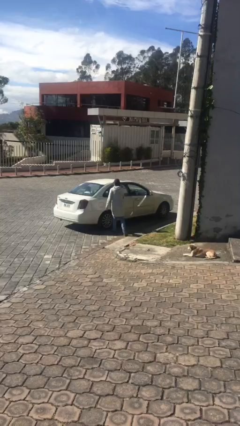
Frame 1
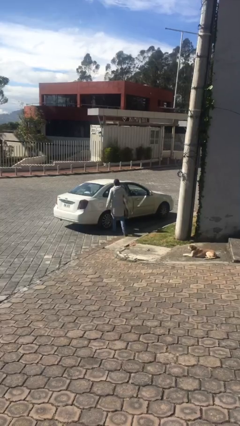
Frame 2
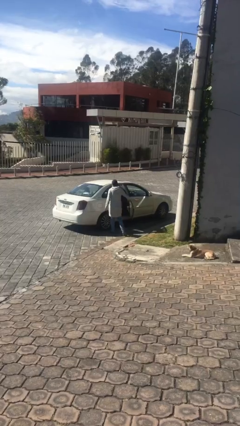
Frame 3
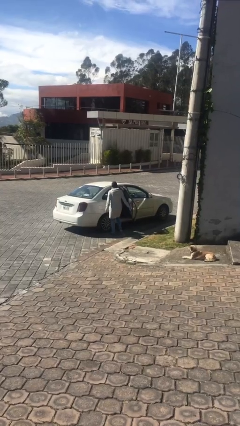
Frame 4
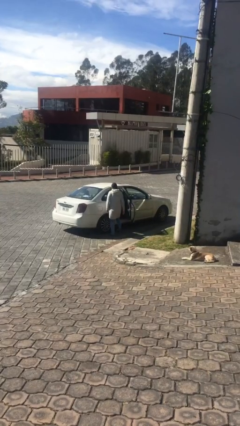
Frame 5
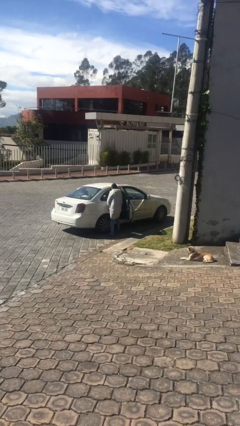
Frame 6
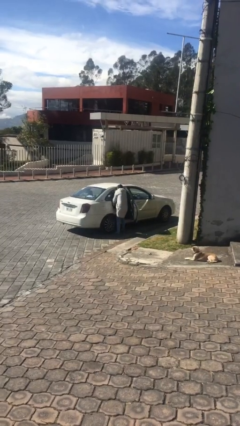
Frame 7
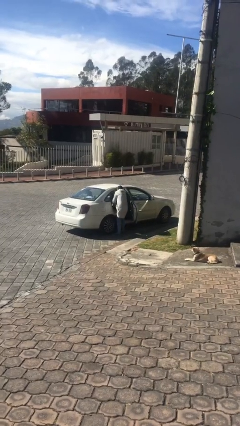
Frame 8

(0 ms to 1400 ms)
person opens car door

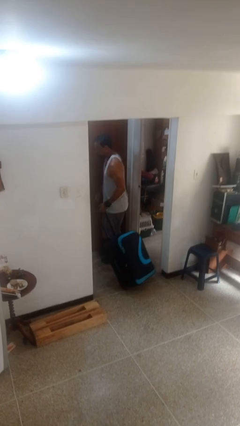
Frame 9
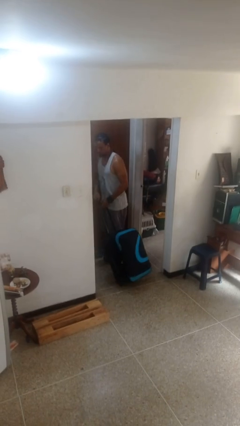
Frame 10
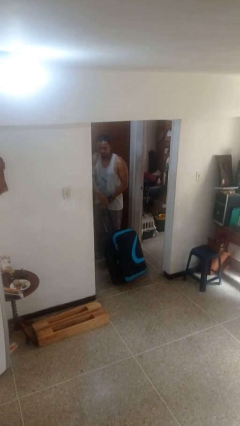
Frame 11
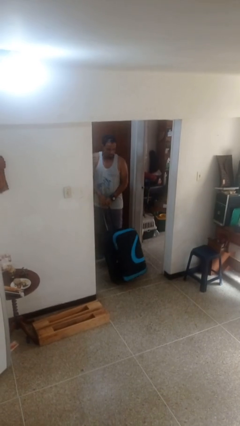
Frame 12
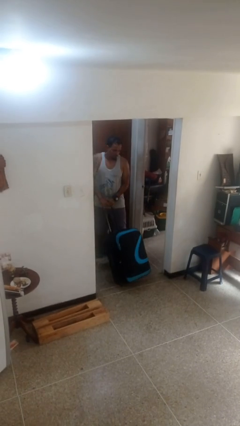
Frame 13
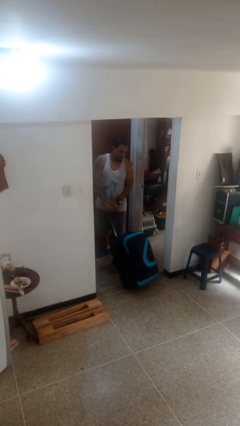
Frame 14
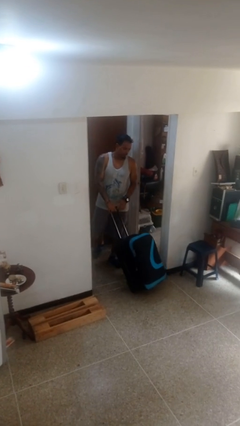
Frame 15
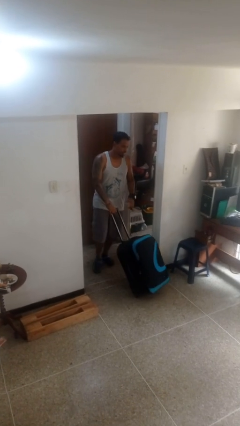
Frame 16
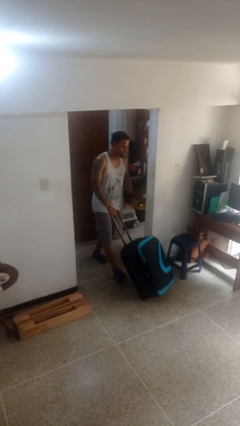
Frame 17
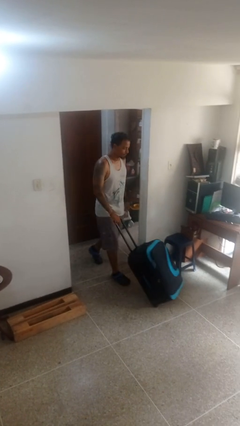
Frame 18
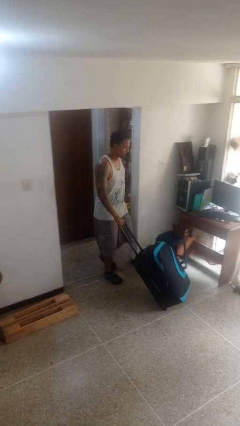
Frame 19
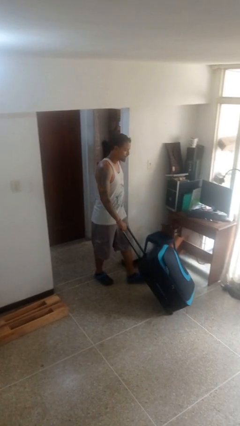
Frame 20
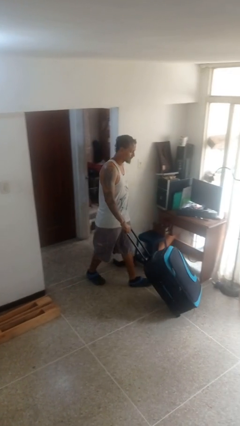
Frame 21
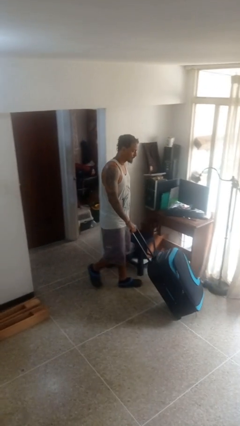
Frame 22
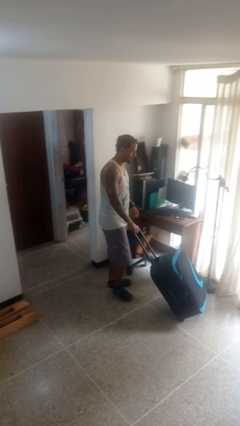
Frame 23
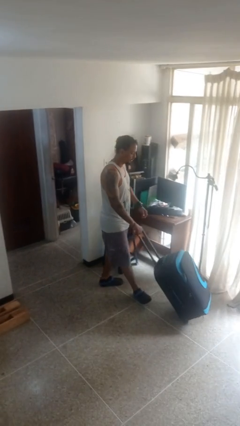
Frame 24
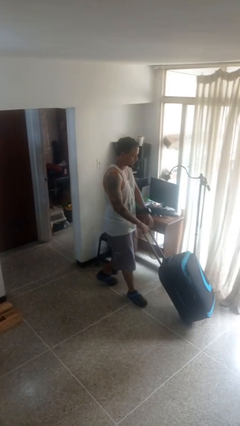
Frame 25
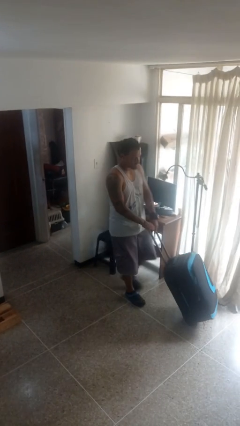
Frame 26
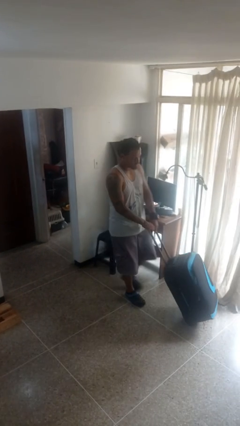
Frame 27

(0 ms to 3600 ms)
person pushes wheeled cart

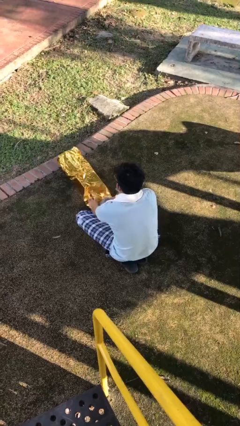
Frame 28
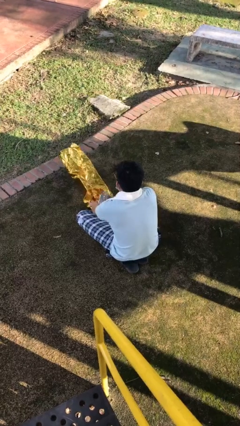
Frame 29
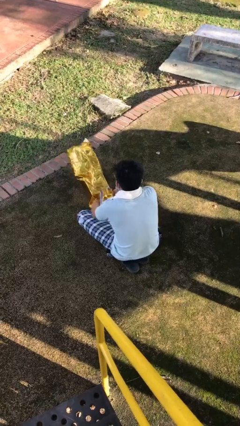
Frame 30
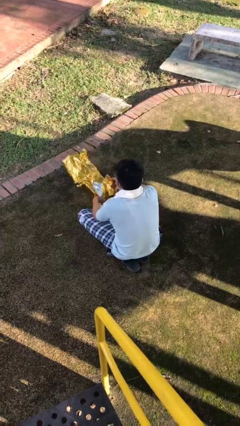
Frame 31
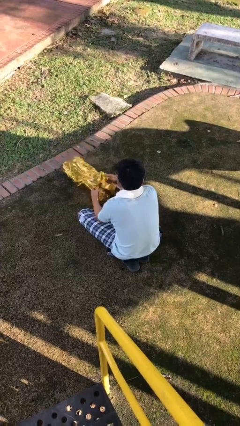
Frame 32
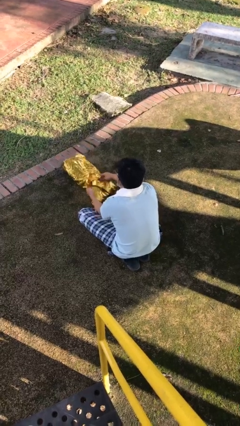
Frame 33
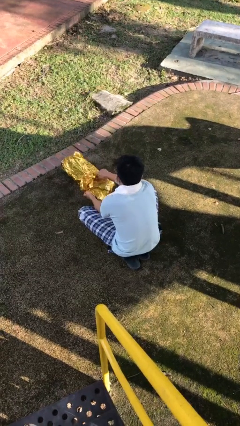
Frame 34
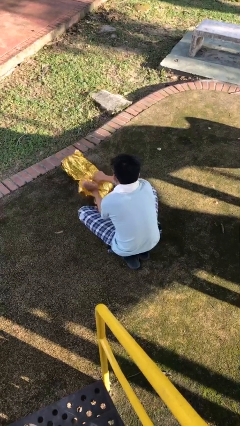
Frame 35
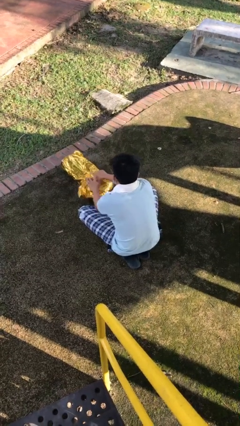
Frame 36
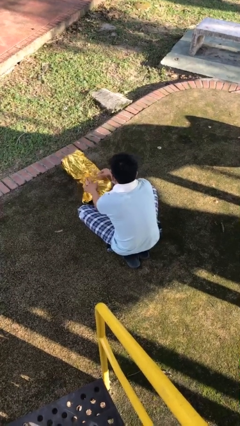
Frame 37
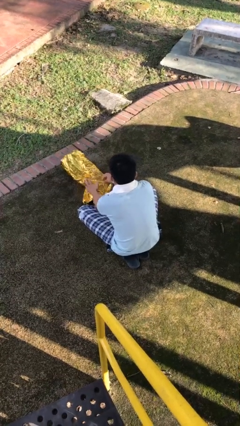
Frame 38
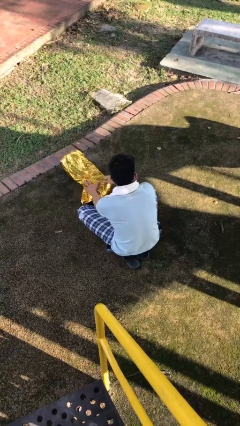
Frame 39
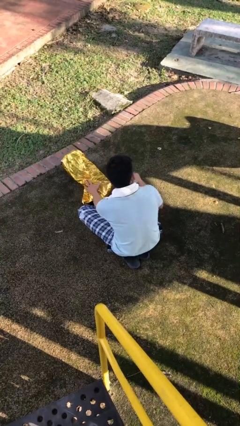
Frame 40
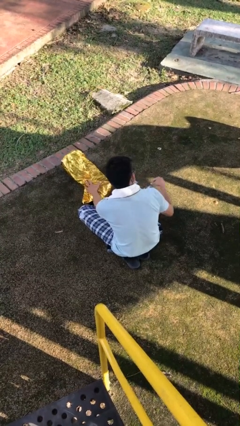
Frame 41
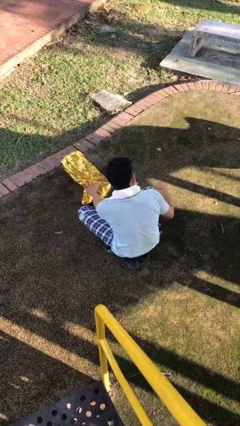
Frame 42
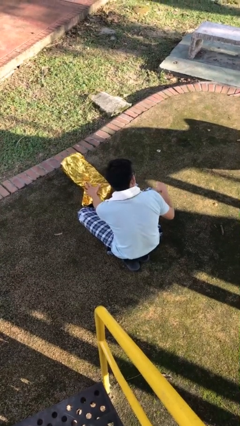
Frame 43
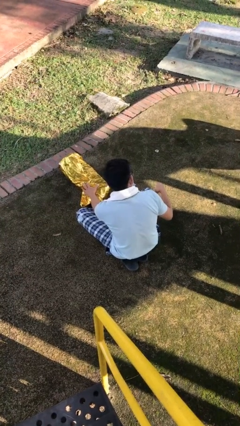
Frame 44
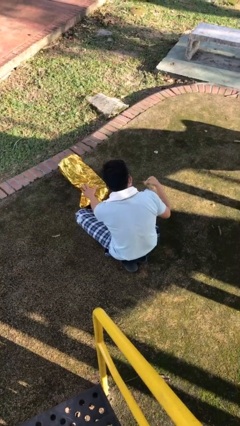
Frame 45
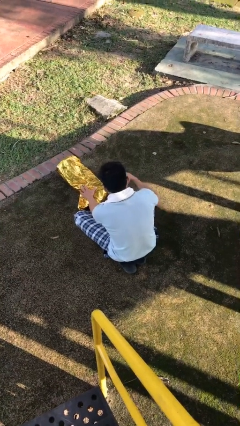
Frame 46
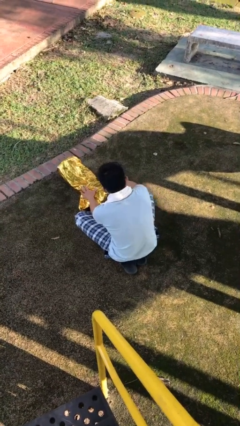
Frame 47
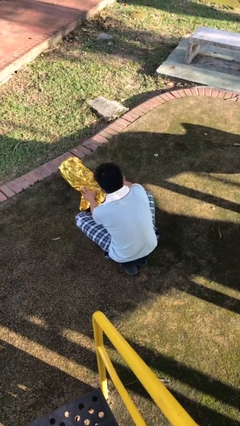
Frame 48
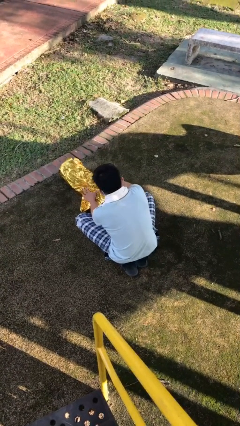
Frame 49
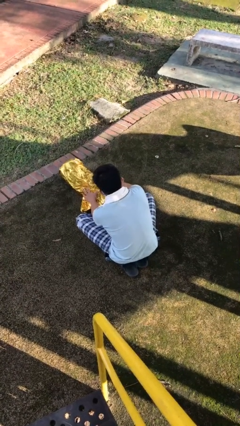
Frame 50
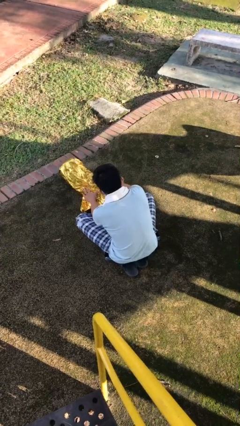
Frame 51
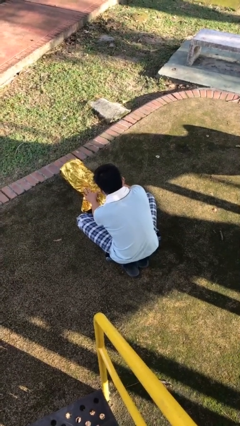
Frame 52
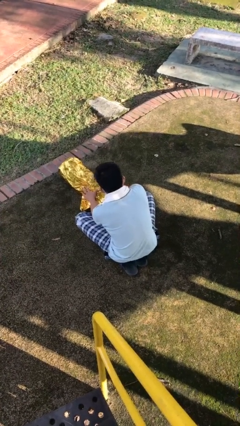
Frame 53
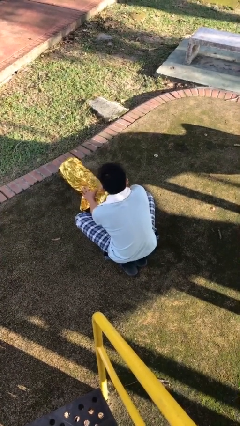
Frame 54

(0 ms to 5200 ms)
person wraps box

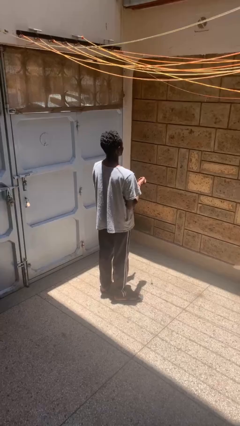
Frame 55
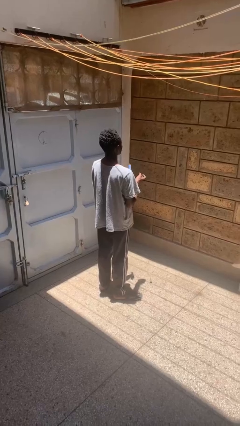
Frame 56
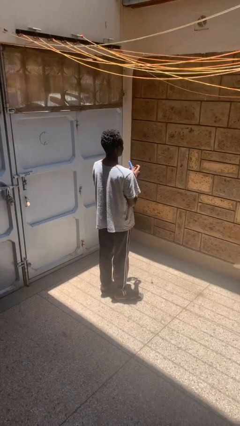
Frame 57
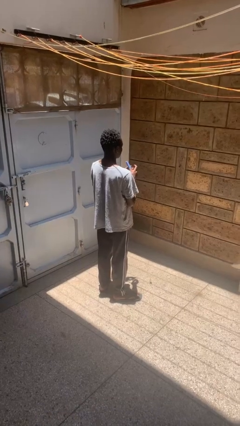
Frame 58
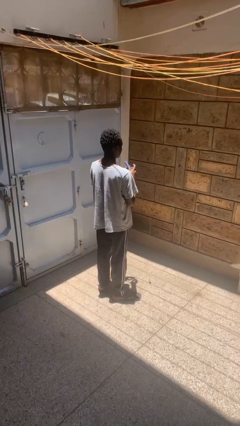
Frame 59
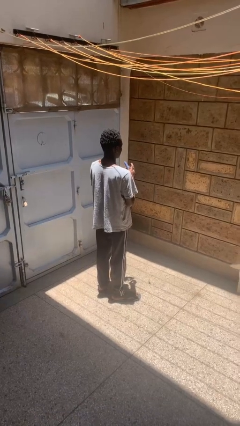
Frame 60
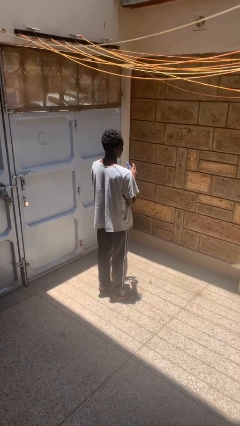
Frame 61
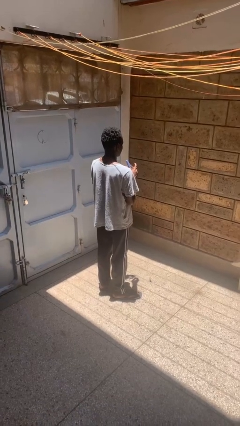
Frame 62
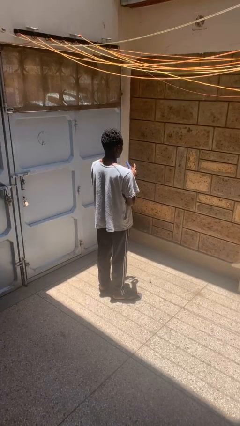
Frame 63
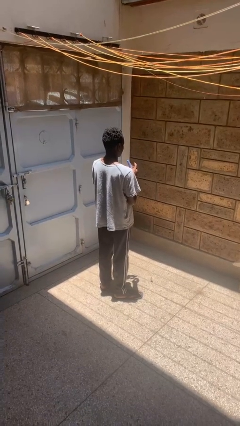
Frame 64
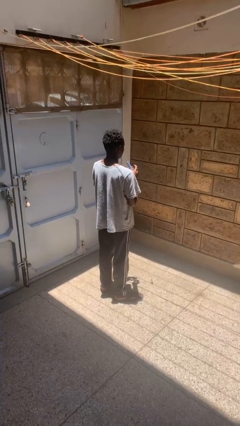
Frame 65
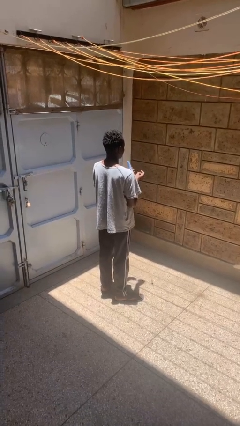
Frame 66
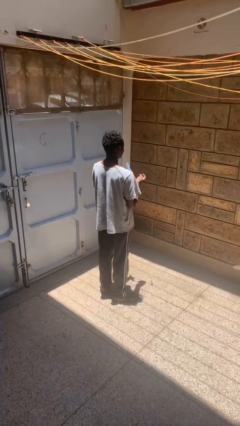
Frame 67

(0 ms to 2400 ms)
person files fingernails

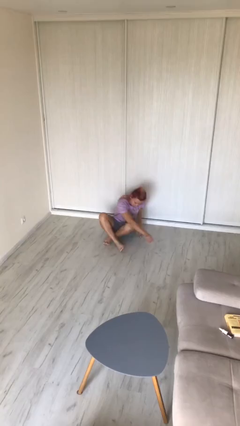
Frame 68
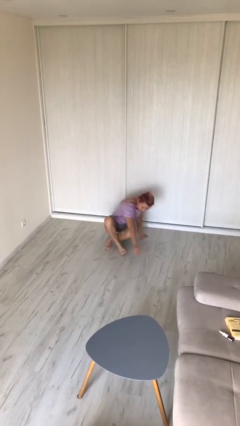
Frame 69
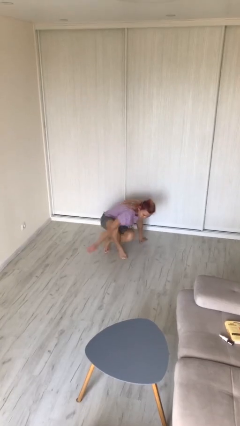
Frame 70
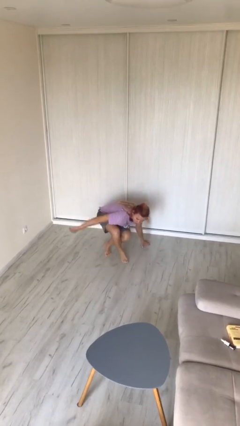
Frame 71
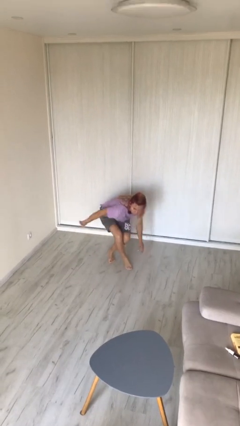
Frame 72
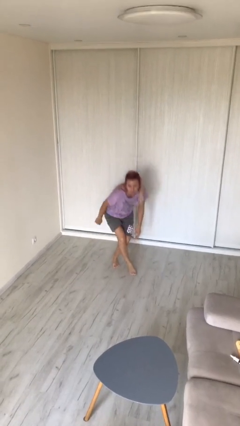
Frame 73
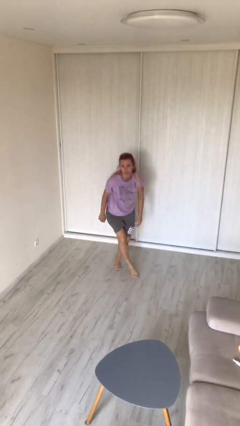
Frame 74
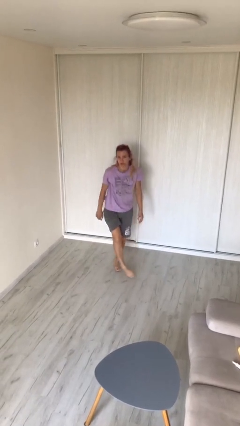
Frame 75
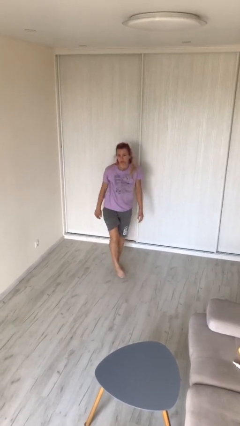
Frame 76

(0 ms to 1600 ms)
person stands up from floor

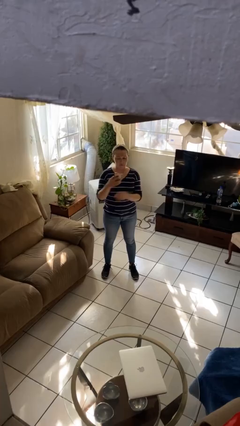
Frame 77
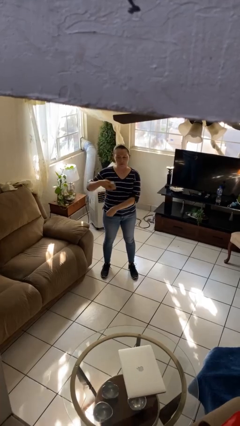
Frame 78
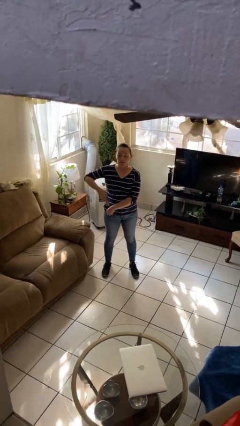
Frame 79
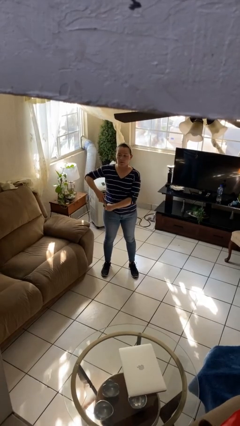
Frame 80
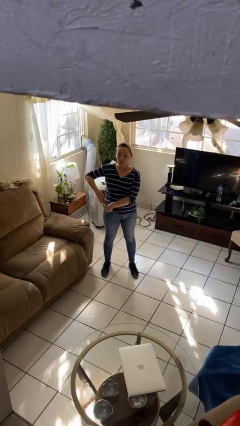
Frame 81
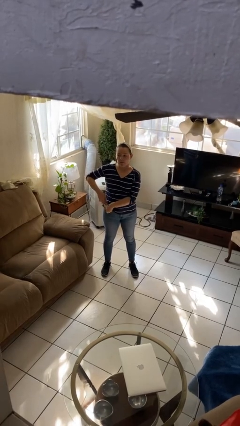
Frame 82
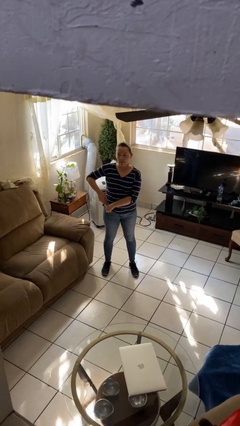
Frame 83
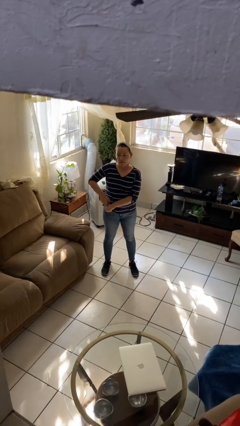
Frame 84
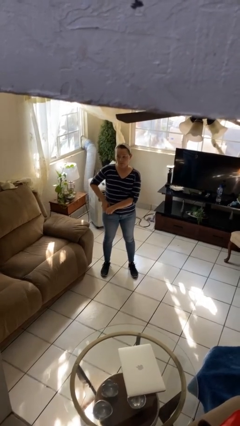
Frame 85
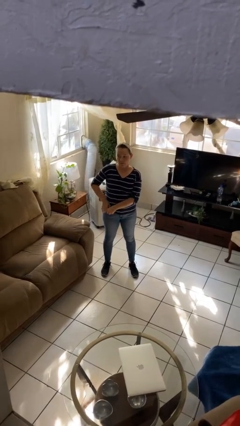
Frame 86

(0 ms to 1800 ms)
person puts phone into pocket

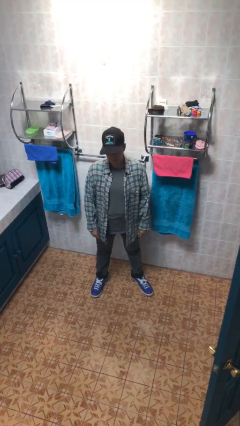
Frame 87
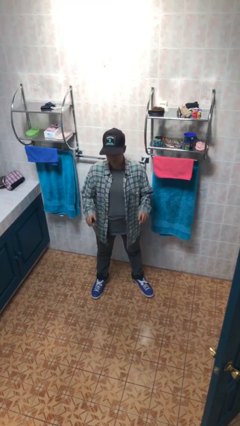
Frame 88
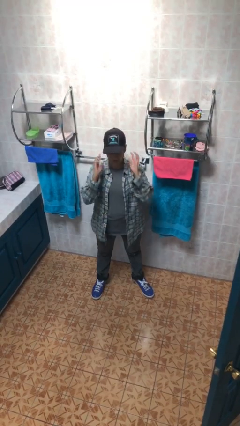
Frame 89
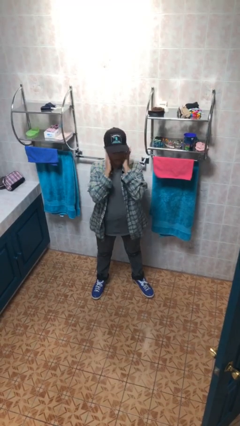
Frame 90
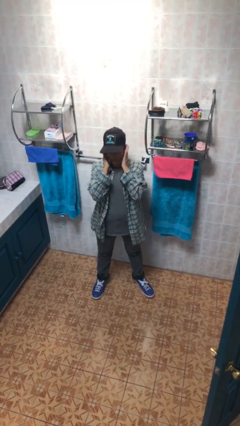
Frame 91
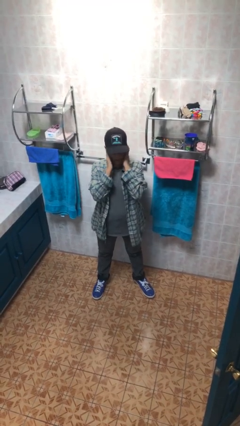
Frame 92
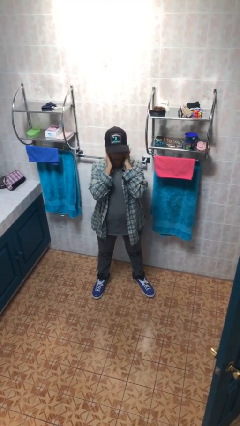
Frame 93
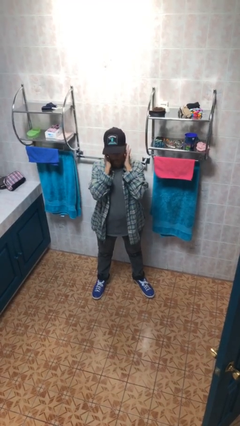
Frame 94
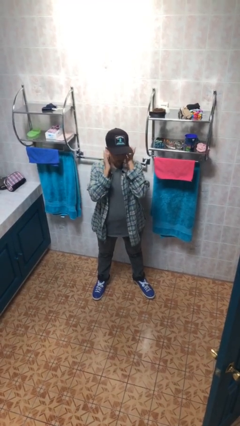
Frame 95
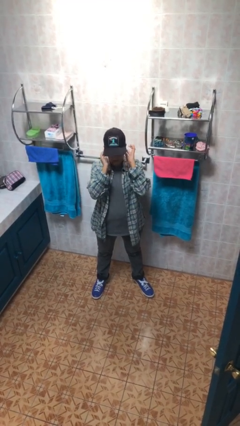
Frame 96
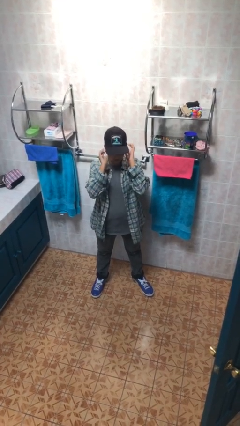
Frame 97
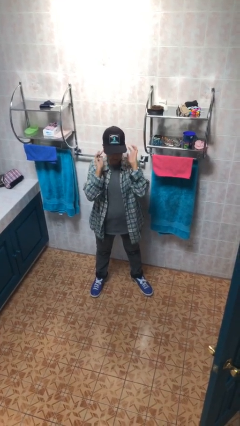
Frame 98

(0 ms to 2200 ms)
person puts fingers in ear
